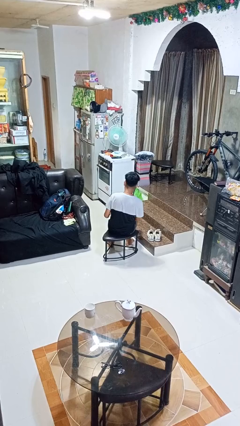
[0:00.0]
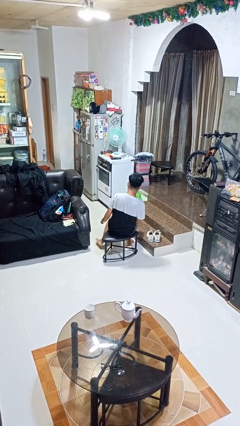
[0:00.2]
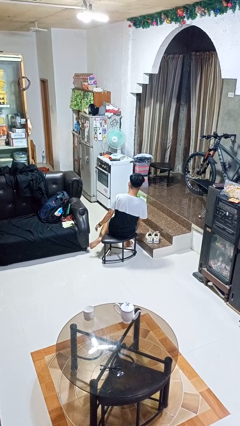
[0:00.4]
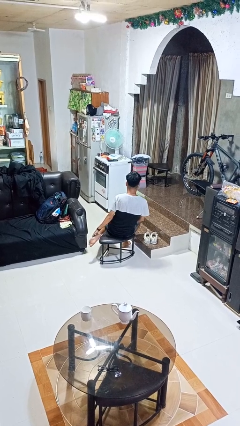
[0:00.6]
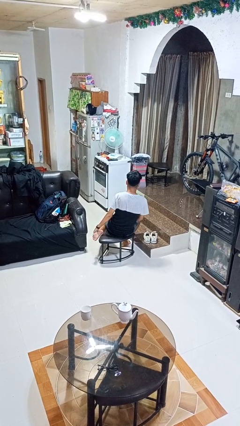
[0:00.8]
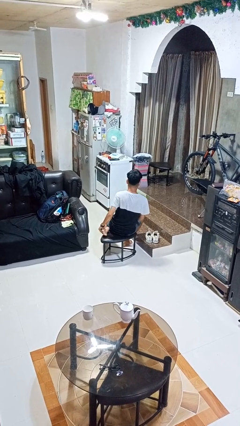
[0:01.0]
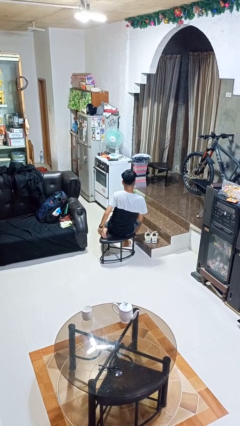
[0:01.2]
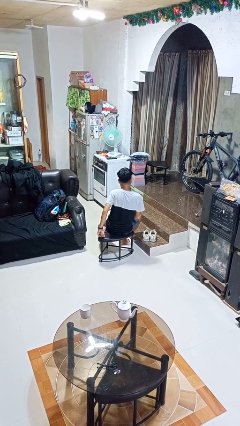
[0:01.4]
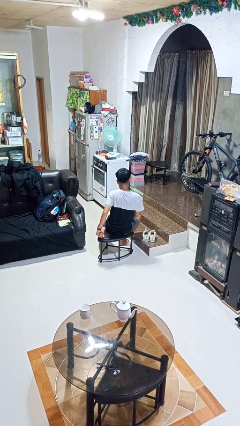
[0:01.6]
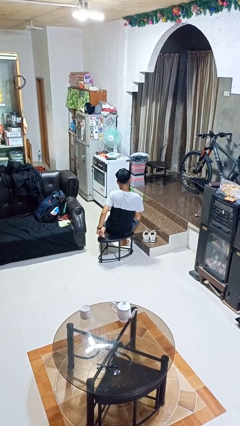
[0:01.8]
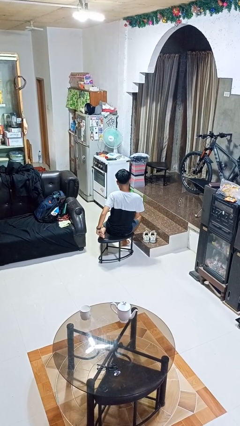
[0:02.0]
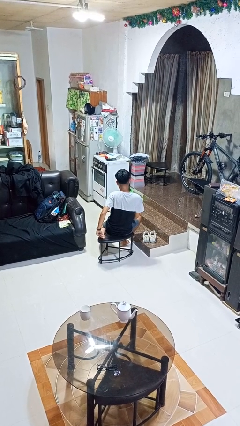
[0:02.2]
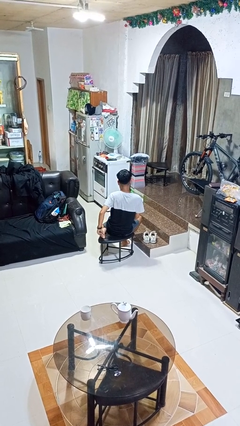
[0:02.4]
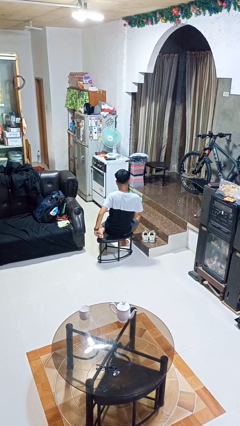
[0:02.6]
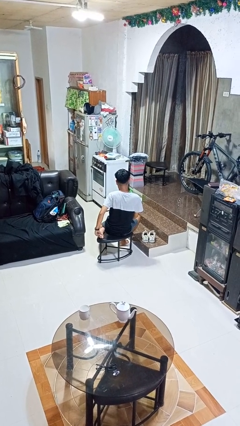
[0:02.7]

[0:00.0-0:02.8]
person rubs foot

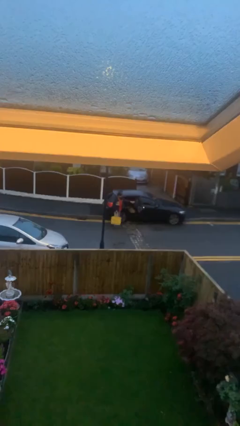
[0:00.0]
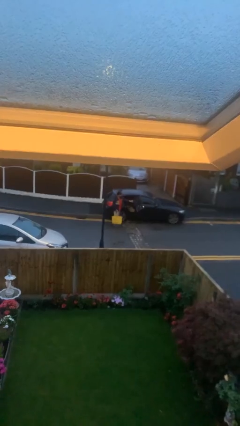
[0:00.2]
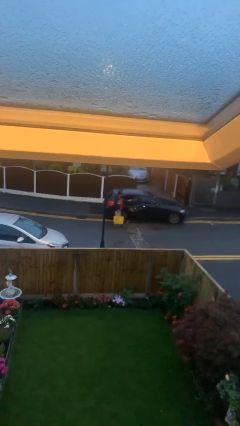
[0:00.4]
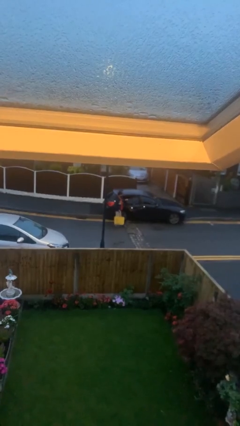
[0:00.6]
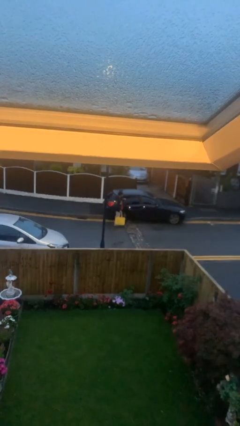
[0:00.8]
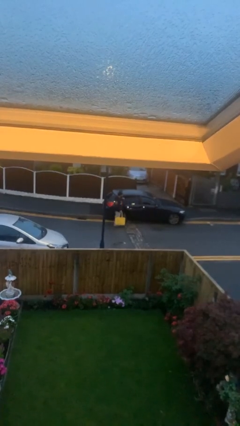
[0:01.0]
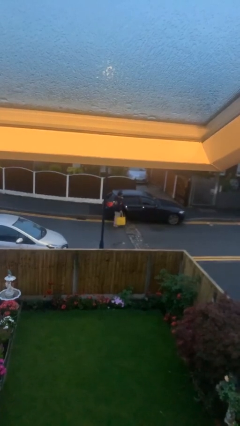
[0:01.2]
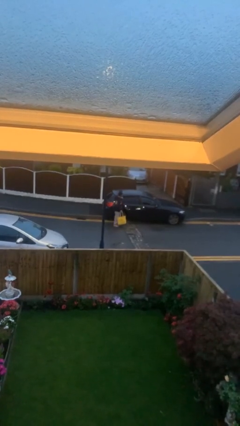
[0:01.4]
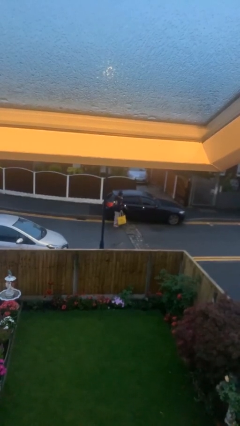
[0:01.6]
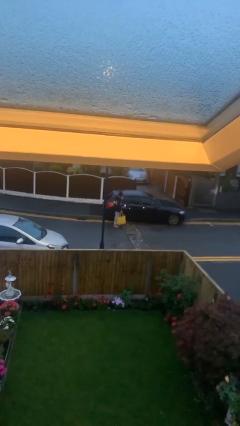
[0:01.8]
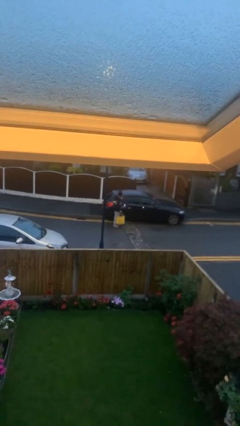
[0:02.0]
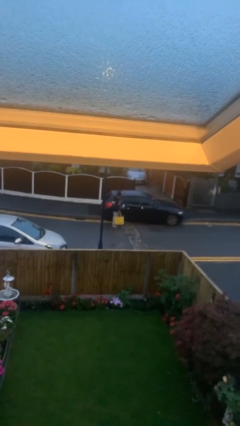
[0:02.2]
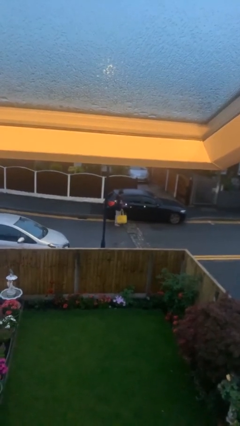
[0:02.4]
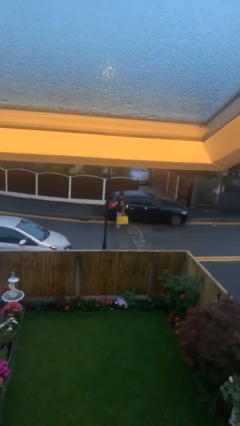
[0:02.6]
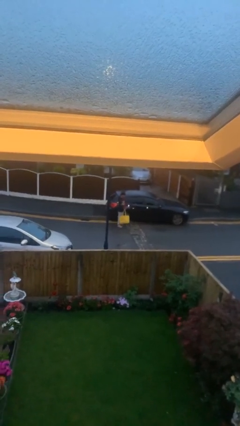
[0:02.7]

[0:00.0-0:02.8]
person closes car door

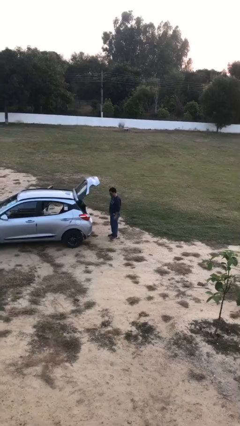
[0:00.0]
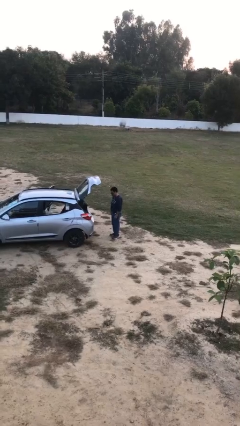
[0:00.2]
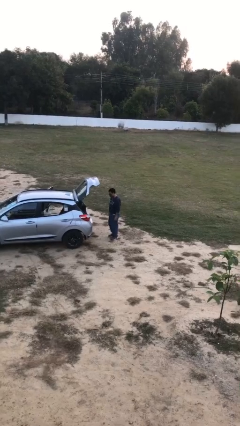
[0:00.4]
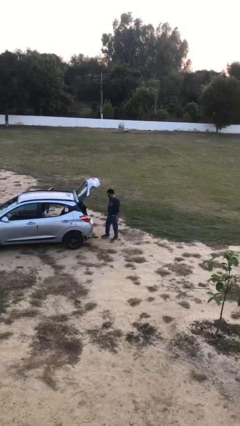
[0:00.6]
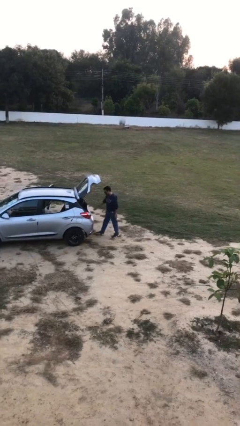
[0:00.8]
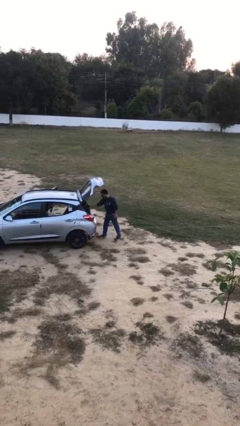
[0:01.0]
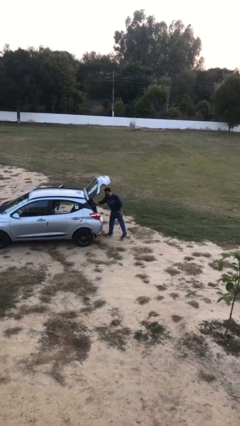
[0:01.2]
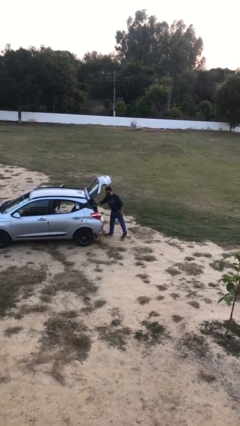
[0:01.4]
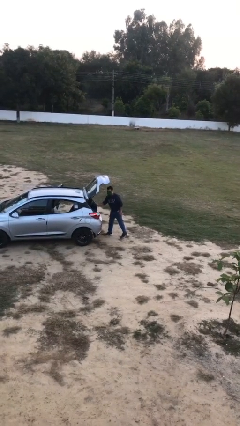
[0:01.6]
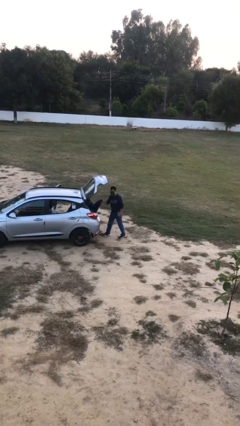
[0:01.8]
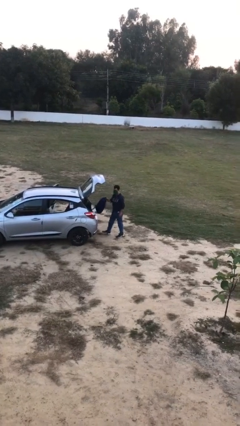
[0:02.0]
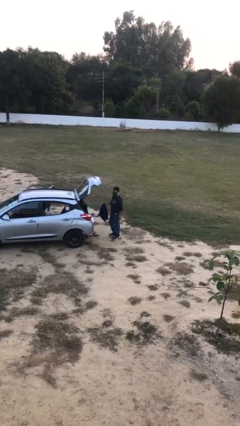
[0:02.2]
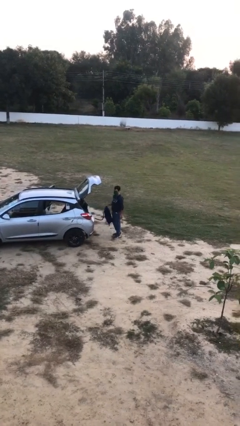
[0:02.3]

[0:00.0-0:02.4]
person unloads car

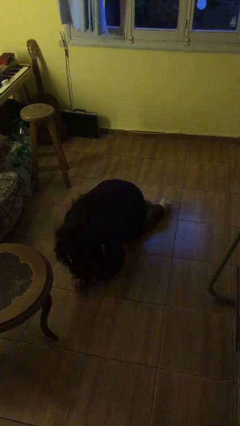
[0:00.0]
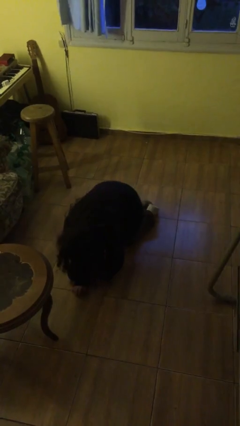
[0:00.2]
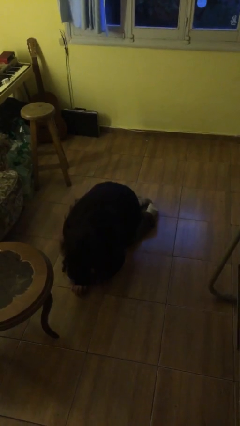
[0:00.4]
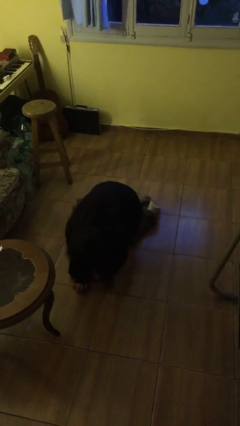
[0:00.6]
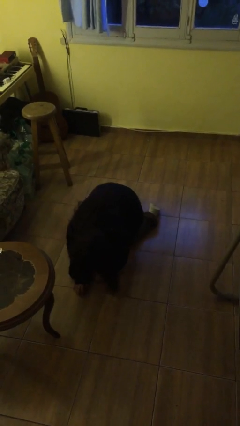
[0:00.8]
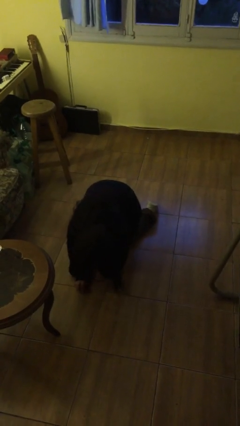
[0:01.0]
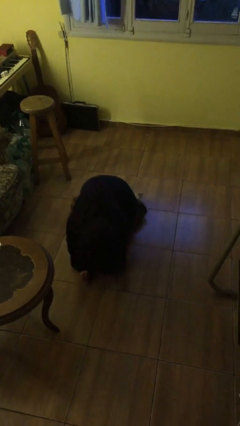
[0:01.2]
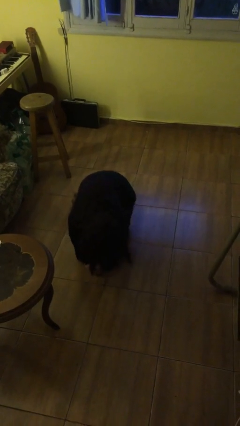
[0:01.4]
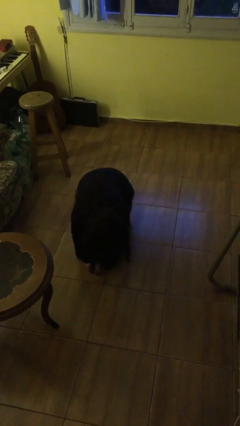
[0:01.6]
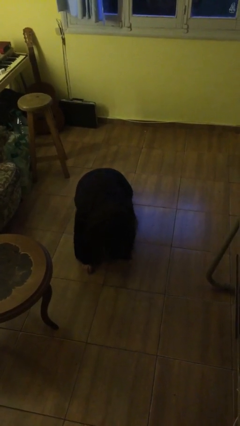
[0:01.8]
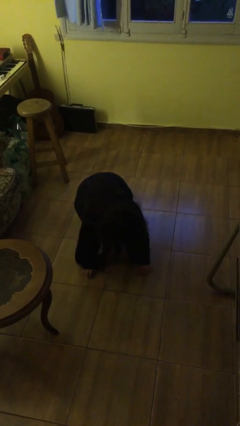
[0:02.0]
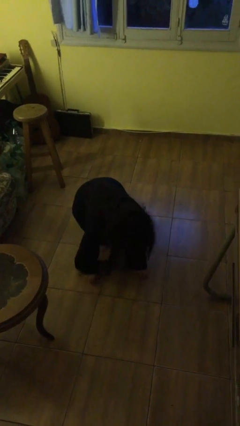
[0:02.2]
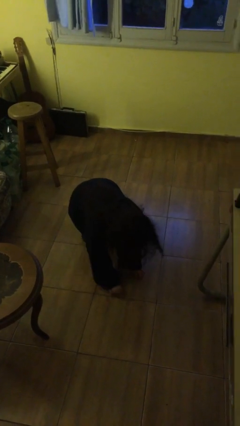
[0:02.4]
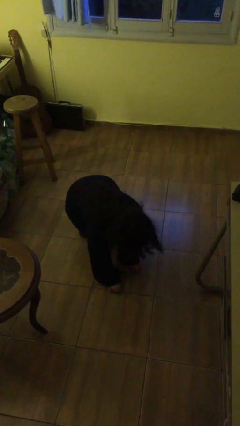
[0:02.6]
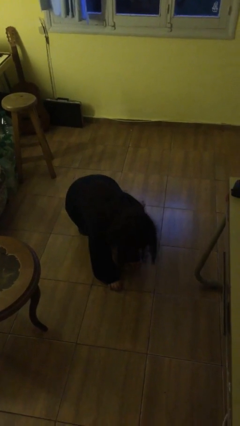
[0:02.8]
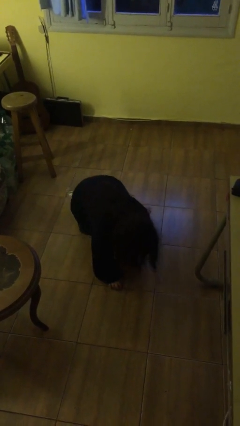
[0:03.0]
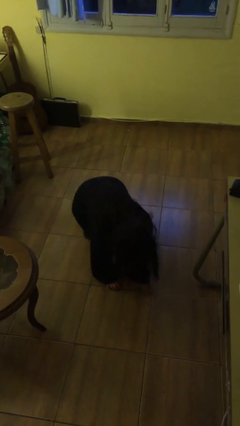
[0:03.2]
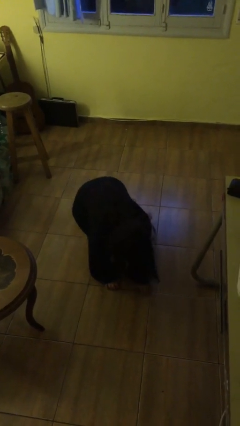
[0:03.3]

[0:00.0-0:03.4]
person crawls

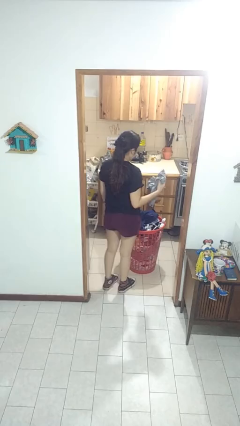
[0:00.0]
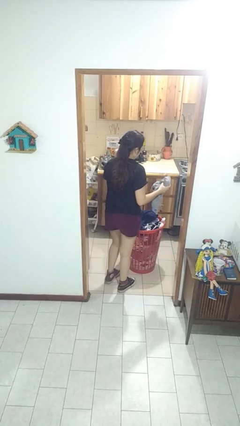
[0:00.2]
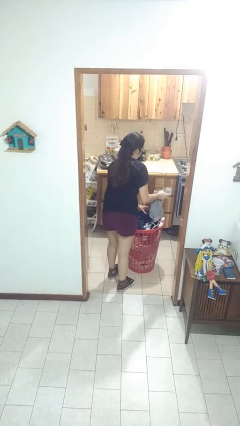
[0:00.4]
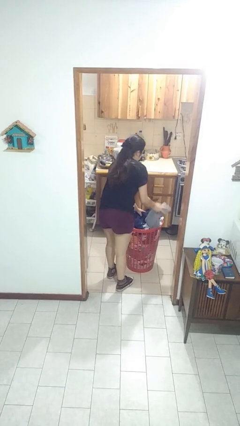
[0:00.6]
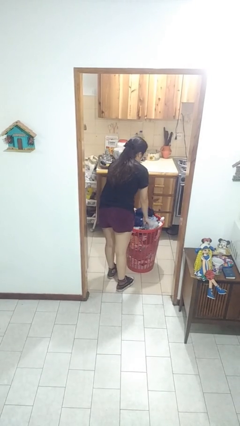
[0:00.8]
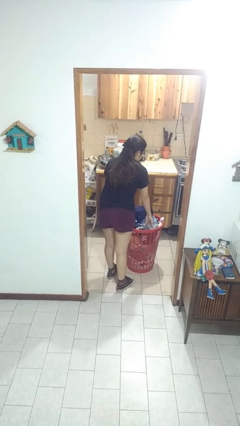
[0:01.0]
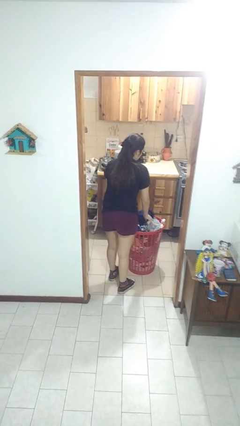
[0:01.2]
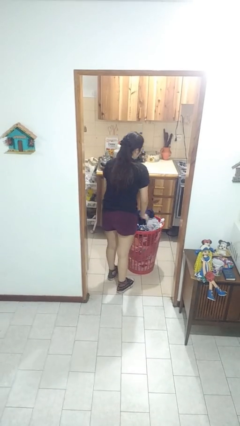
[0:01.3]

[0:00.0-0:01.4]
person puts object into basket

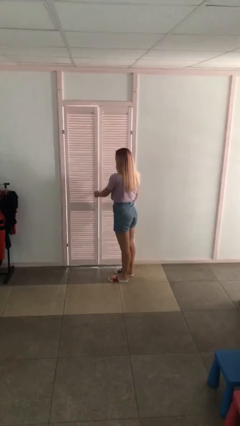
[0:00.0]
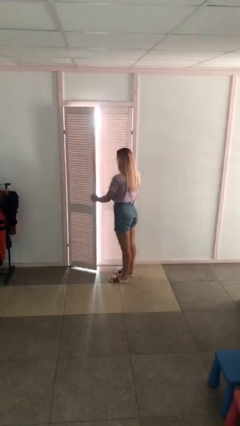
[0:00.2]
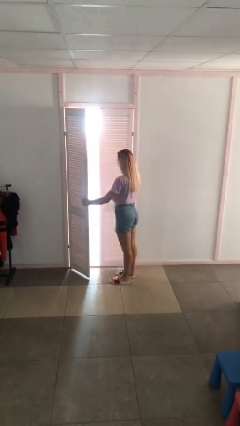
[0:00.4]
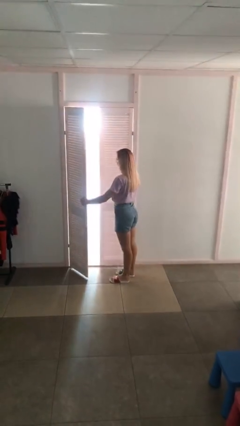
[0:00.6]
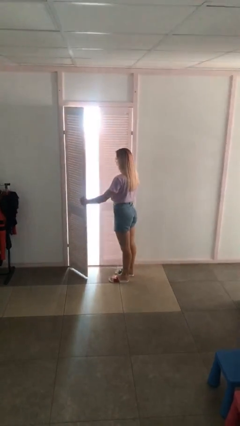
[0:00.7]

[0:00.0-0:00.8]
person opens facility door

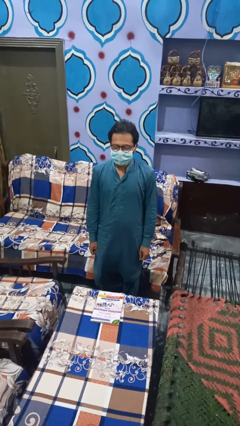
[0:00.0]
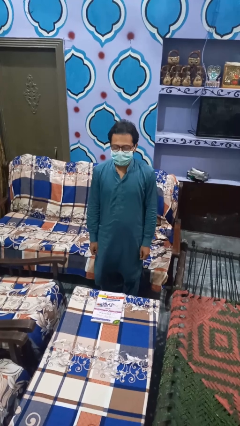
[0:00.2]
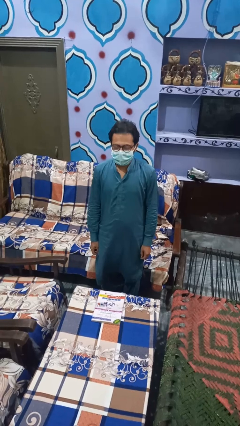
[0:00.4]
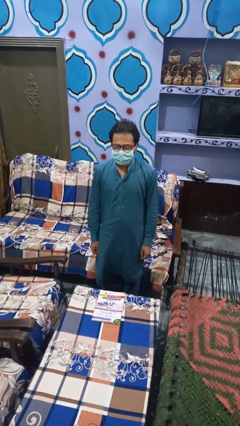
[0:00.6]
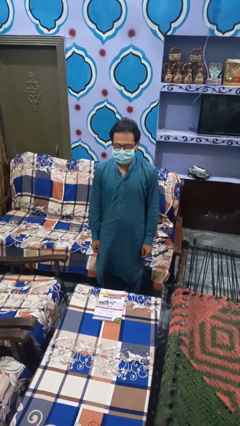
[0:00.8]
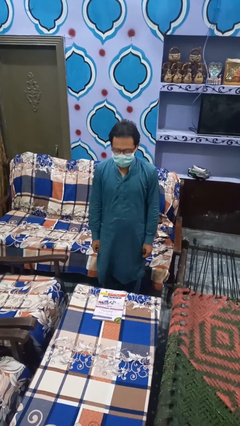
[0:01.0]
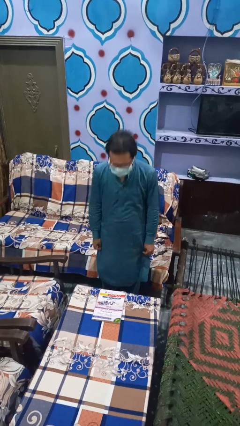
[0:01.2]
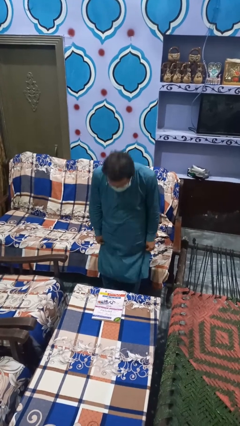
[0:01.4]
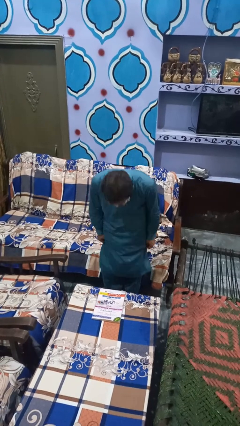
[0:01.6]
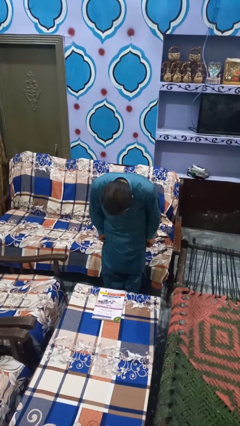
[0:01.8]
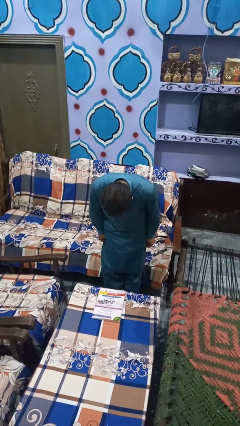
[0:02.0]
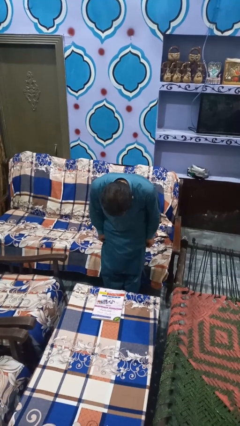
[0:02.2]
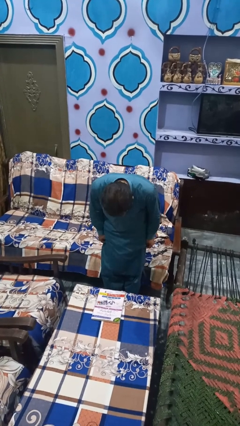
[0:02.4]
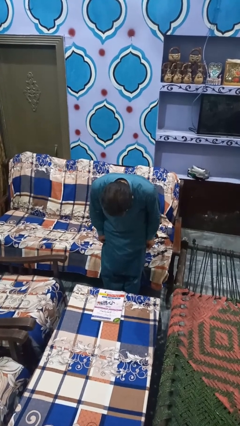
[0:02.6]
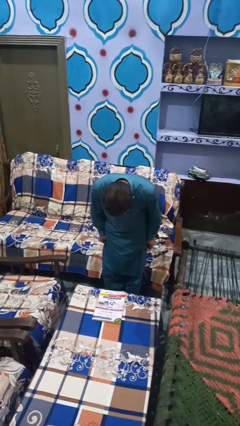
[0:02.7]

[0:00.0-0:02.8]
person bows

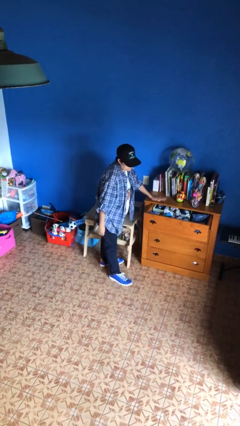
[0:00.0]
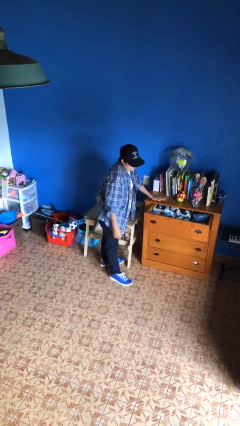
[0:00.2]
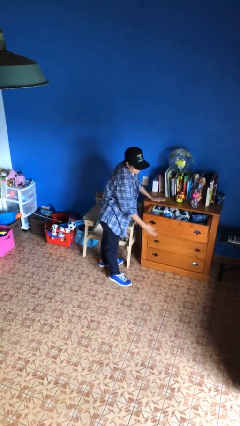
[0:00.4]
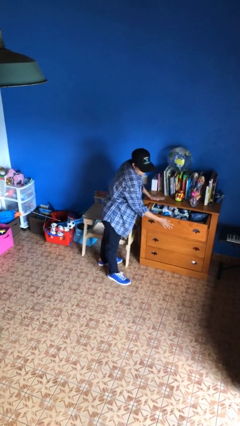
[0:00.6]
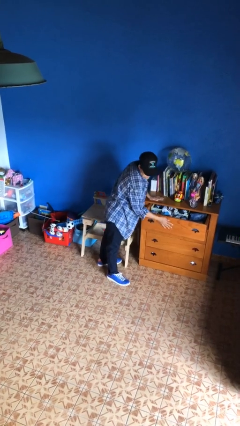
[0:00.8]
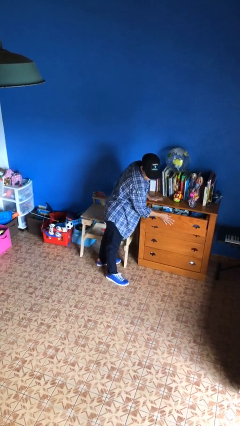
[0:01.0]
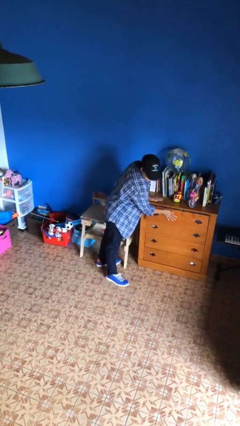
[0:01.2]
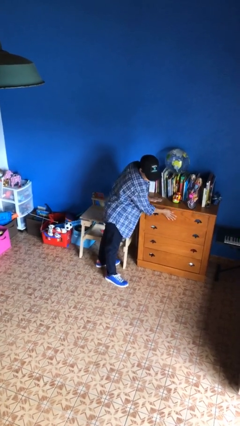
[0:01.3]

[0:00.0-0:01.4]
person closes dresser drawer
